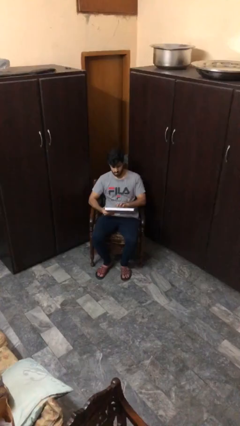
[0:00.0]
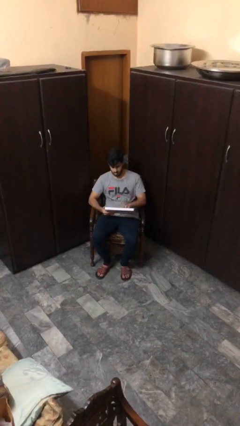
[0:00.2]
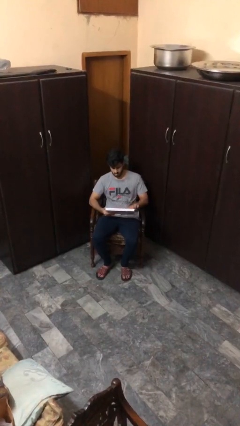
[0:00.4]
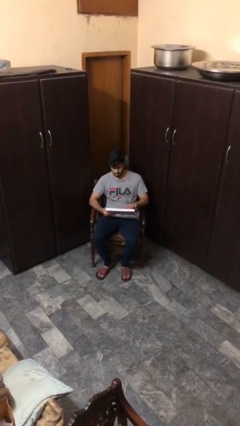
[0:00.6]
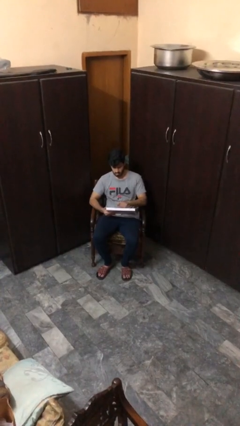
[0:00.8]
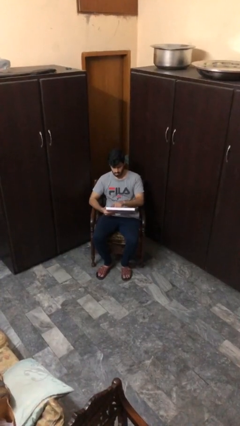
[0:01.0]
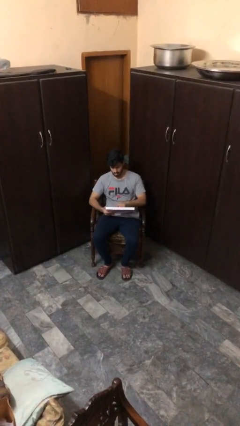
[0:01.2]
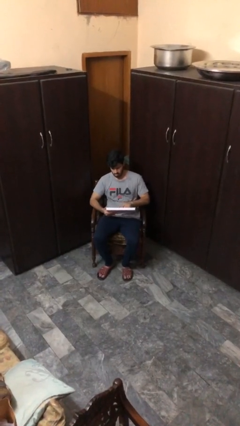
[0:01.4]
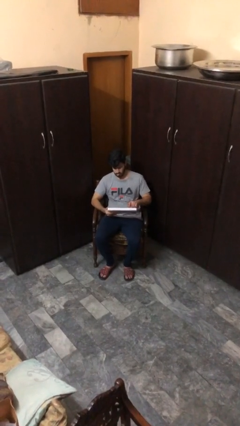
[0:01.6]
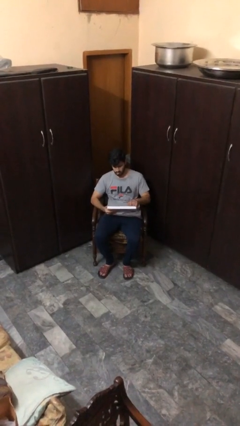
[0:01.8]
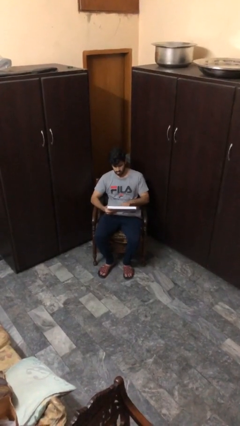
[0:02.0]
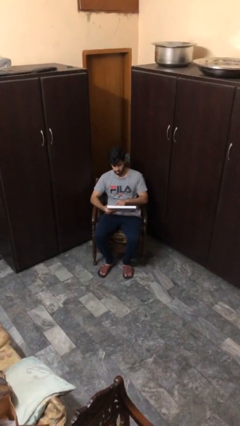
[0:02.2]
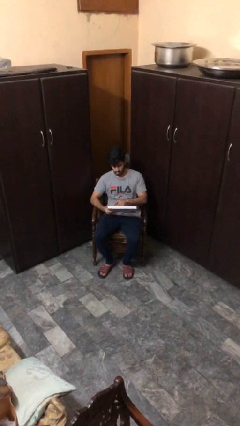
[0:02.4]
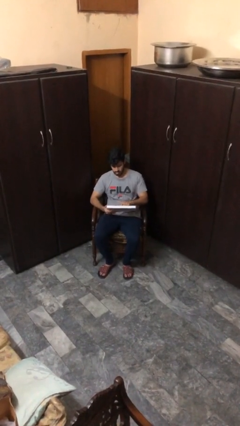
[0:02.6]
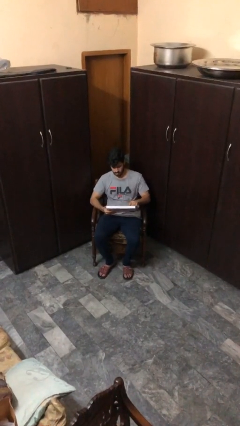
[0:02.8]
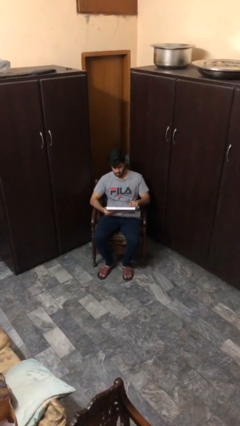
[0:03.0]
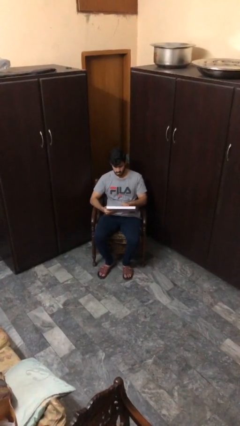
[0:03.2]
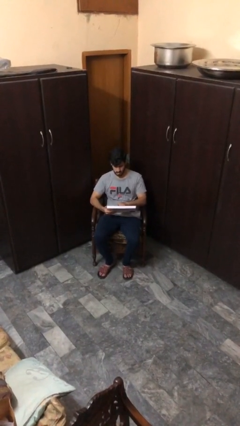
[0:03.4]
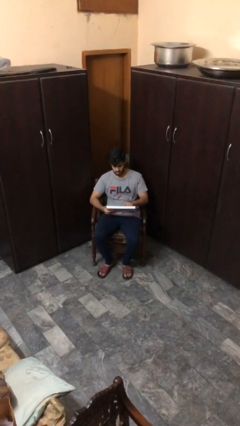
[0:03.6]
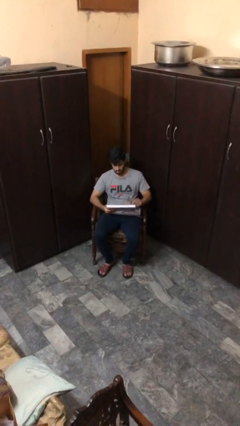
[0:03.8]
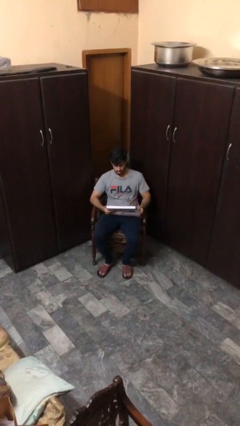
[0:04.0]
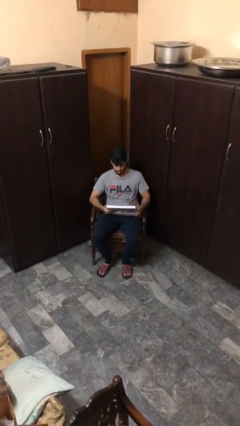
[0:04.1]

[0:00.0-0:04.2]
person interacts with tablet

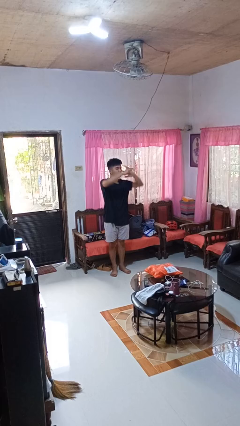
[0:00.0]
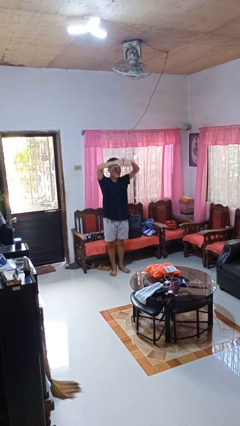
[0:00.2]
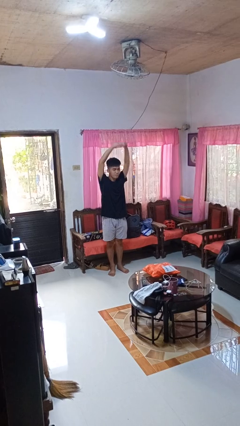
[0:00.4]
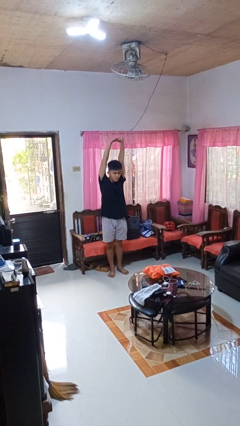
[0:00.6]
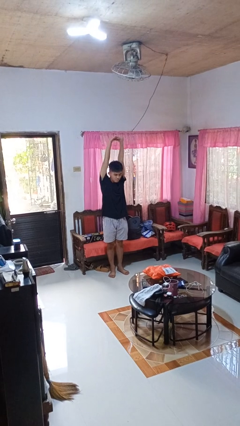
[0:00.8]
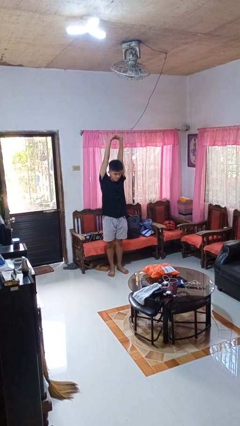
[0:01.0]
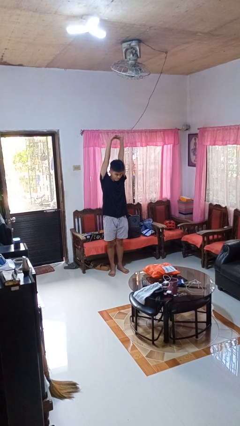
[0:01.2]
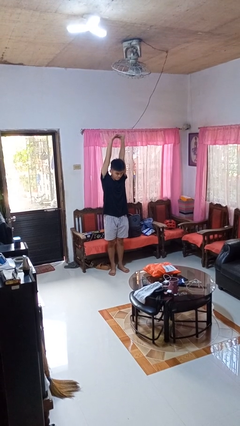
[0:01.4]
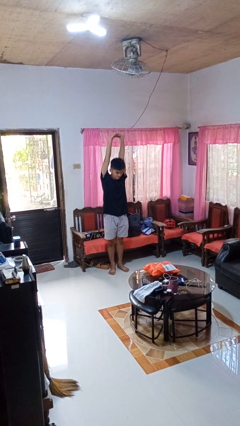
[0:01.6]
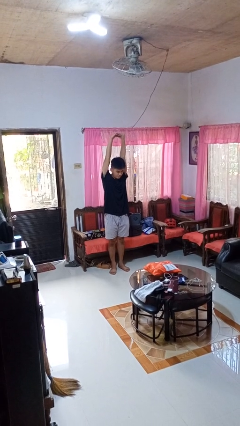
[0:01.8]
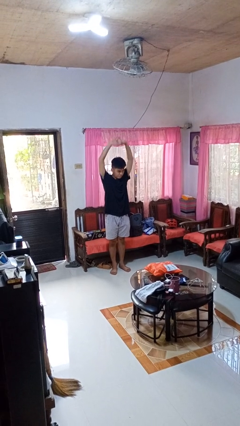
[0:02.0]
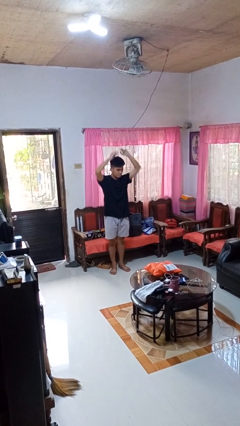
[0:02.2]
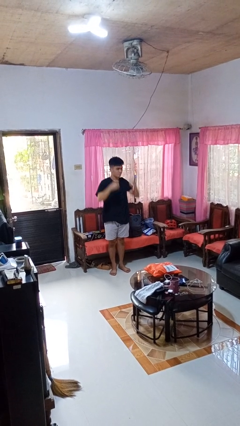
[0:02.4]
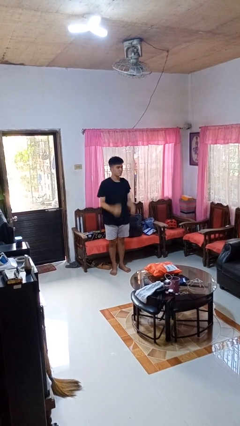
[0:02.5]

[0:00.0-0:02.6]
person stretches arms over head

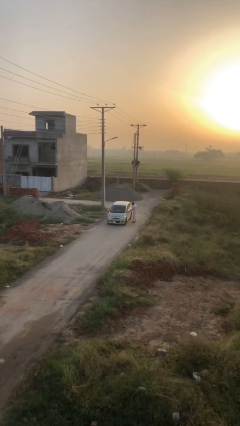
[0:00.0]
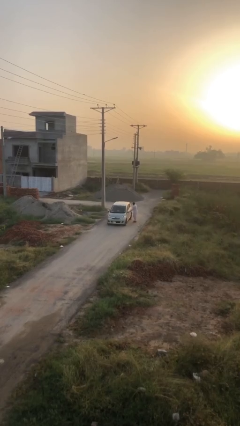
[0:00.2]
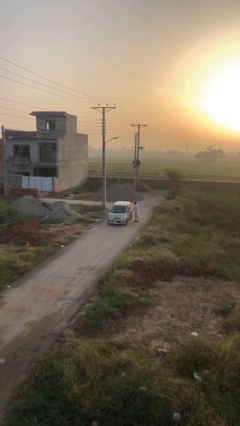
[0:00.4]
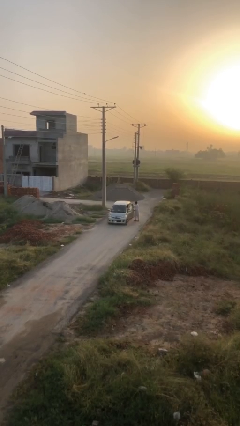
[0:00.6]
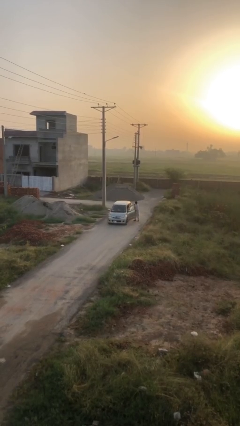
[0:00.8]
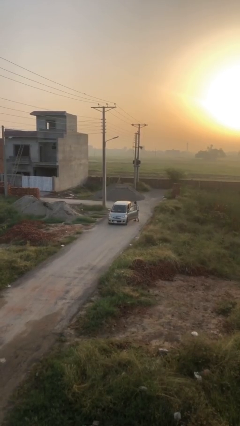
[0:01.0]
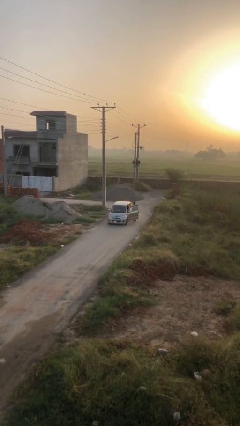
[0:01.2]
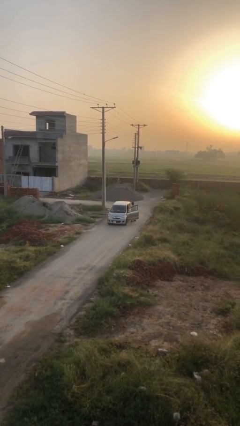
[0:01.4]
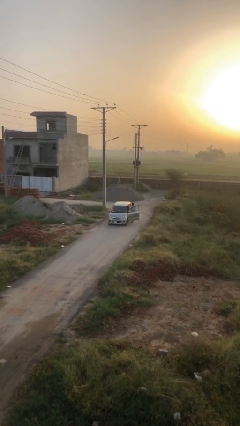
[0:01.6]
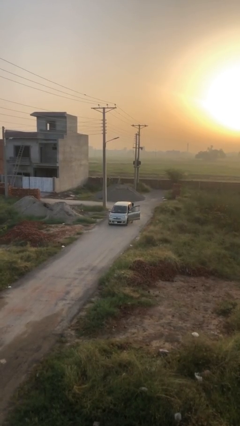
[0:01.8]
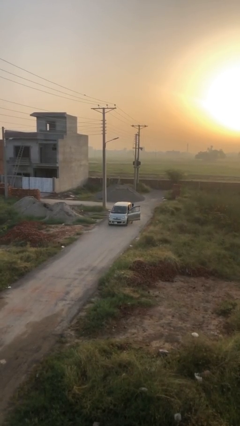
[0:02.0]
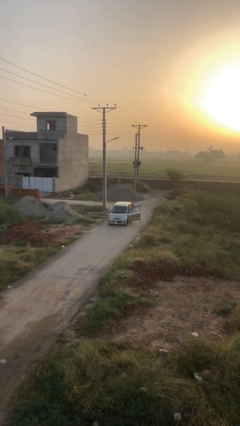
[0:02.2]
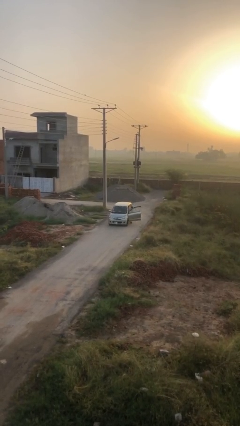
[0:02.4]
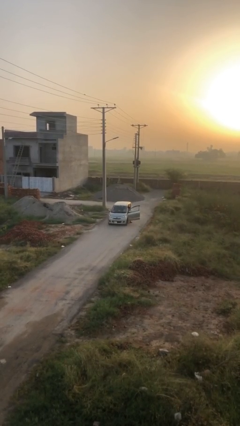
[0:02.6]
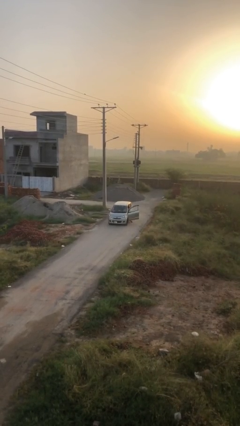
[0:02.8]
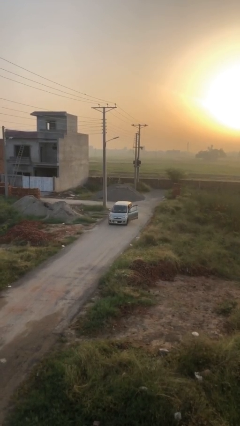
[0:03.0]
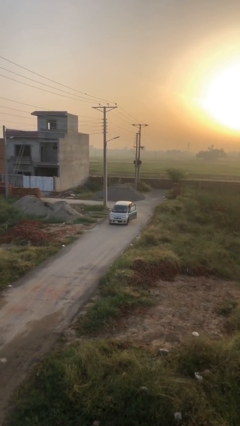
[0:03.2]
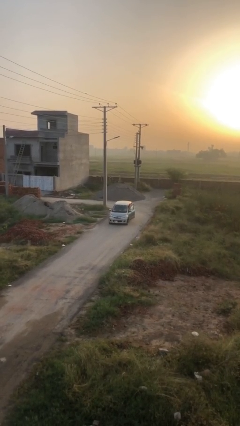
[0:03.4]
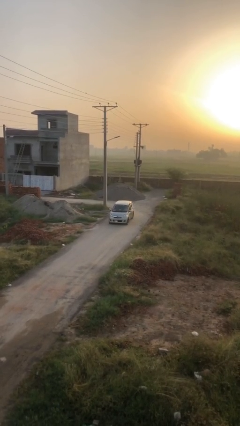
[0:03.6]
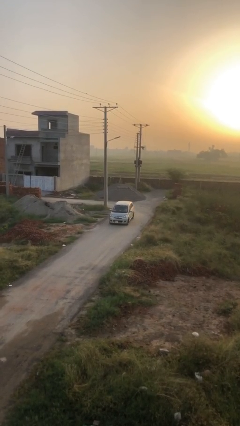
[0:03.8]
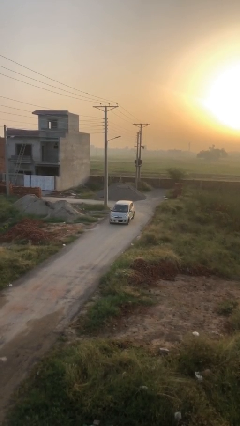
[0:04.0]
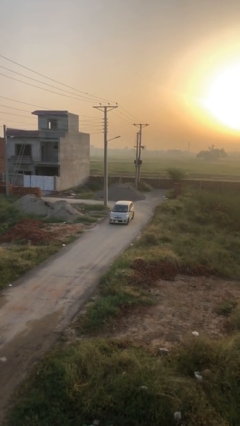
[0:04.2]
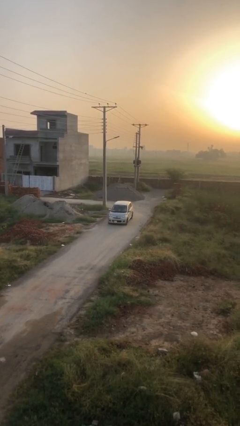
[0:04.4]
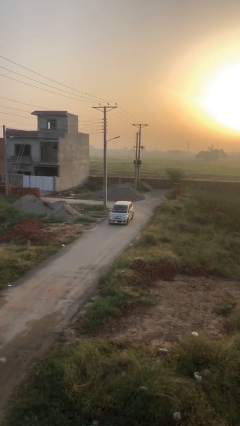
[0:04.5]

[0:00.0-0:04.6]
car picks up person

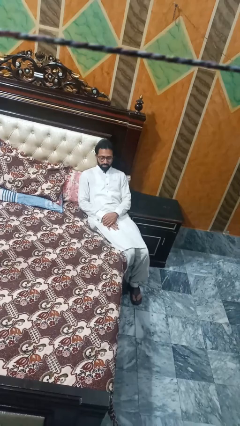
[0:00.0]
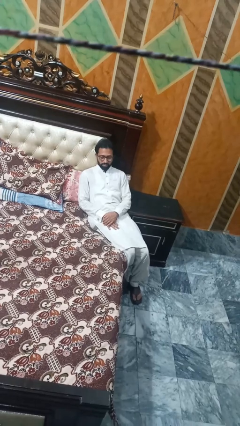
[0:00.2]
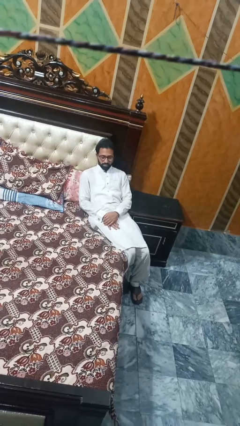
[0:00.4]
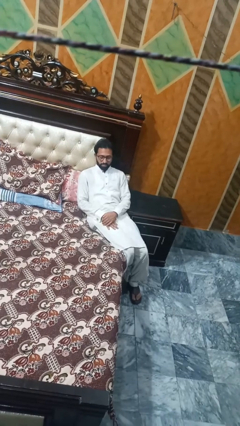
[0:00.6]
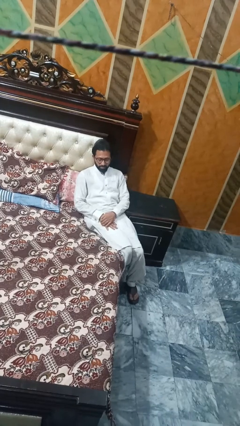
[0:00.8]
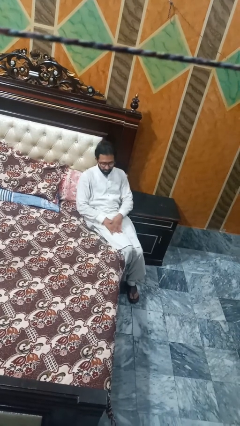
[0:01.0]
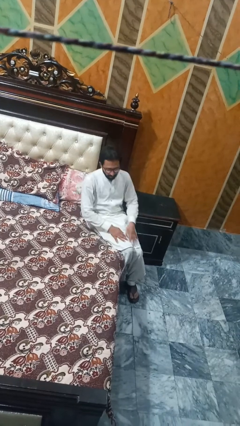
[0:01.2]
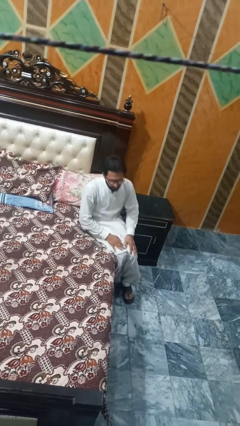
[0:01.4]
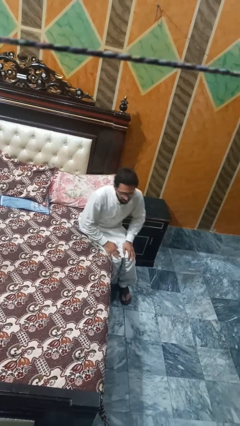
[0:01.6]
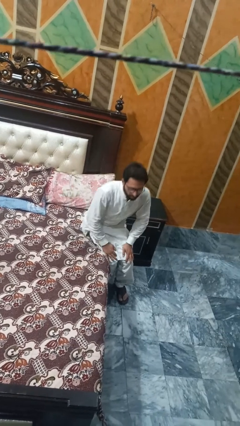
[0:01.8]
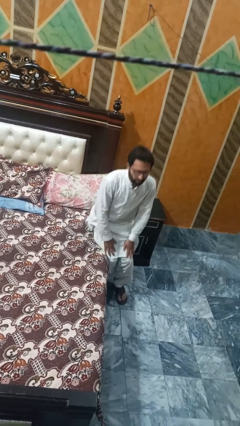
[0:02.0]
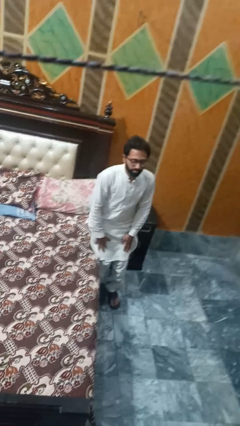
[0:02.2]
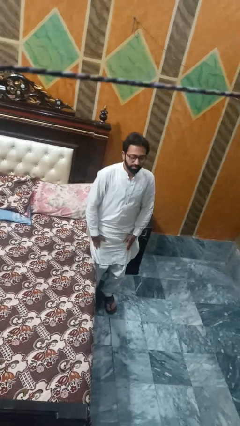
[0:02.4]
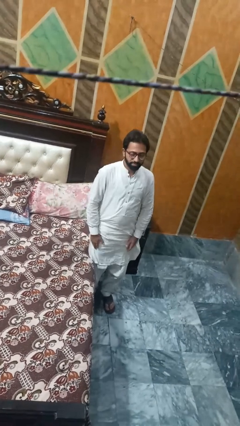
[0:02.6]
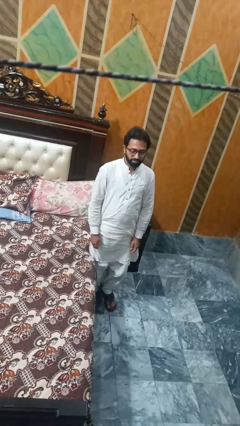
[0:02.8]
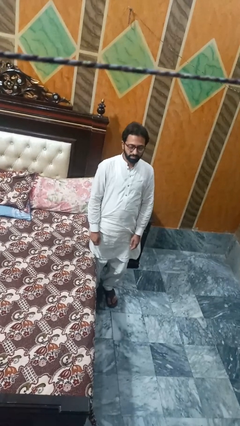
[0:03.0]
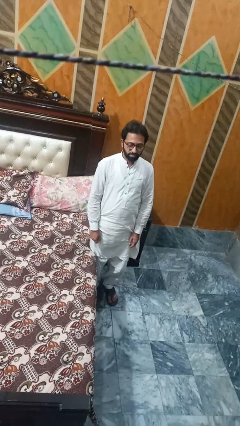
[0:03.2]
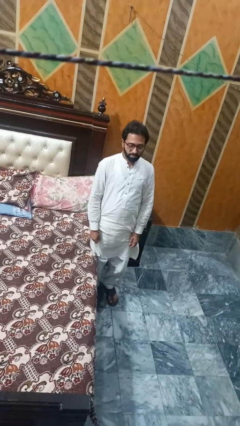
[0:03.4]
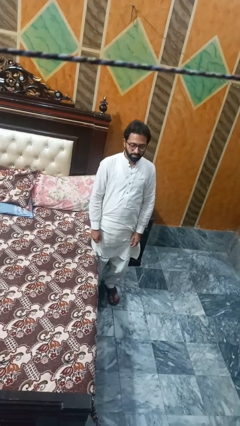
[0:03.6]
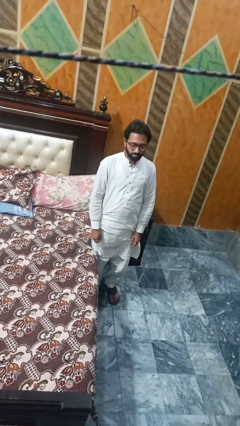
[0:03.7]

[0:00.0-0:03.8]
person stands up

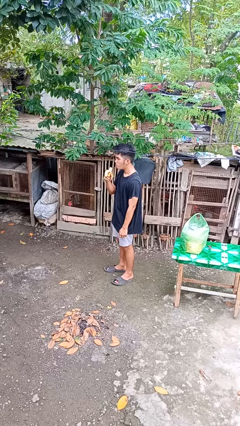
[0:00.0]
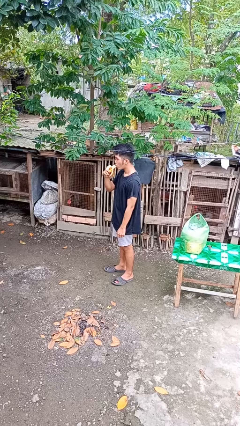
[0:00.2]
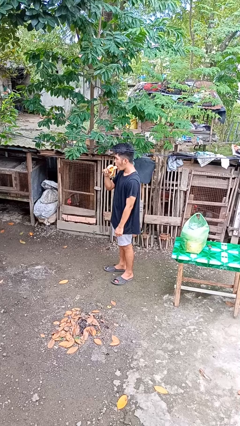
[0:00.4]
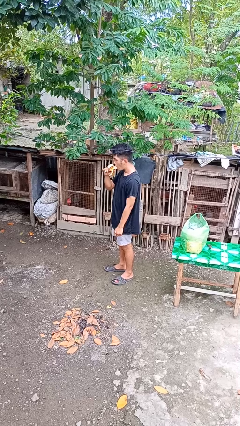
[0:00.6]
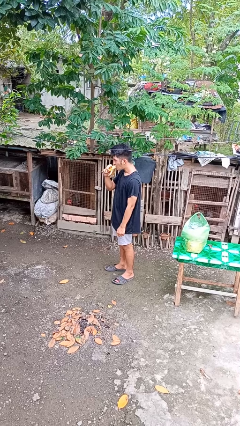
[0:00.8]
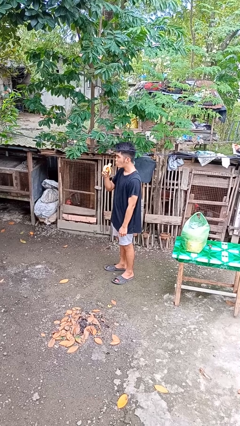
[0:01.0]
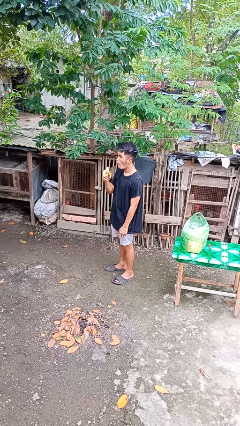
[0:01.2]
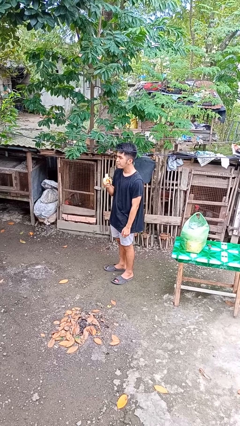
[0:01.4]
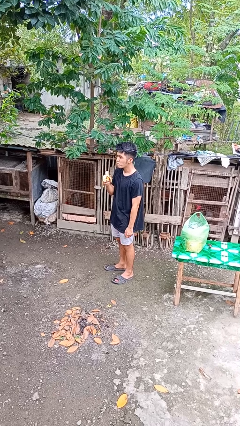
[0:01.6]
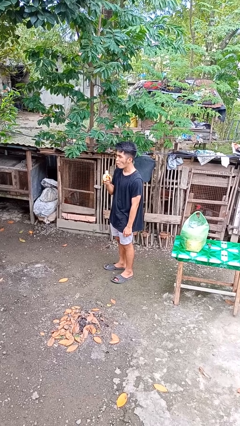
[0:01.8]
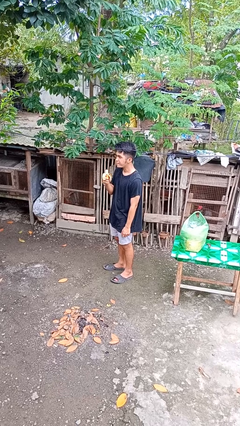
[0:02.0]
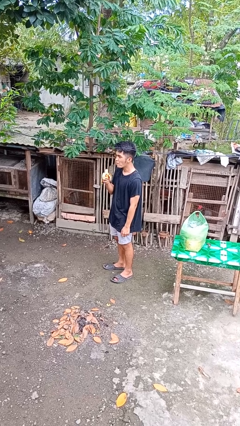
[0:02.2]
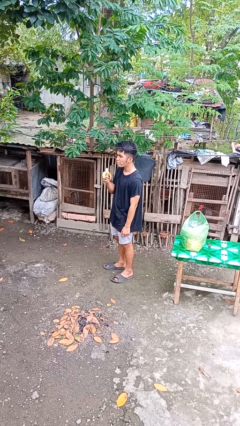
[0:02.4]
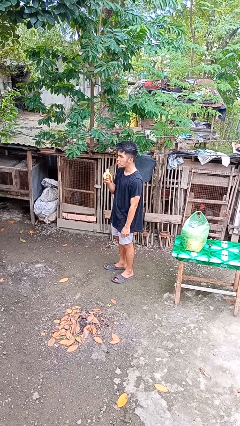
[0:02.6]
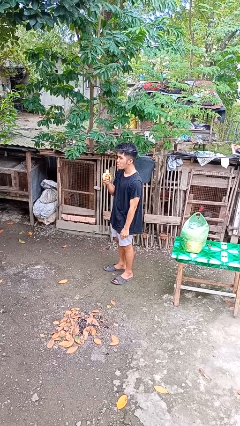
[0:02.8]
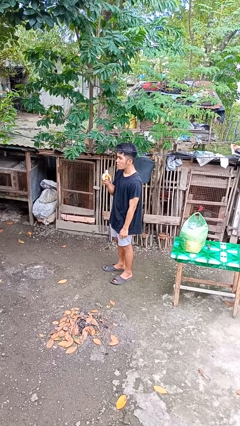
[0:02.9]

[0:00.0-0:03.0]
person eats banana
